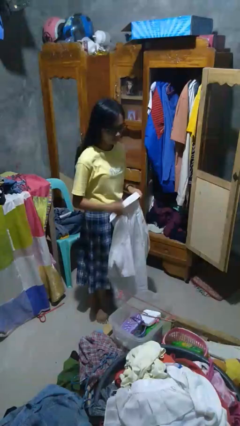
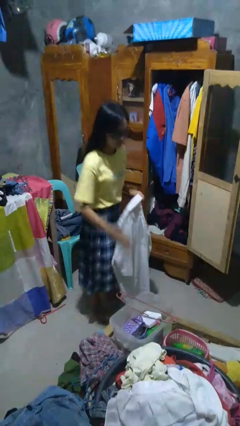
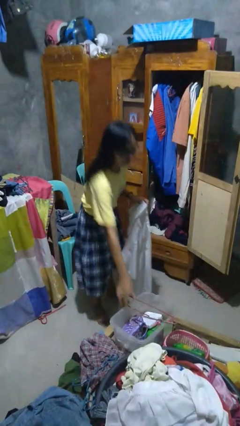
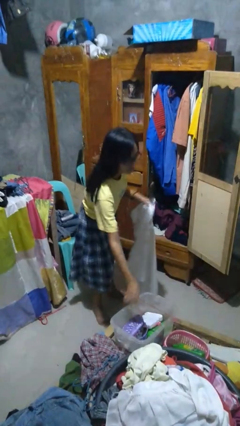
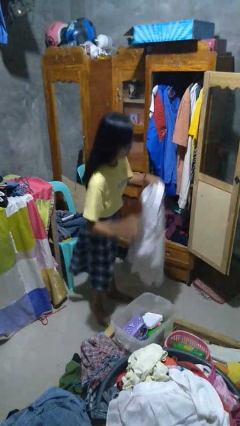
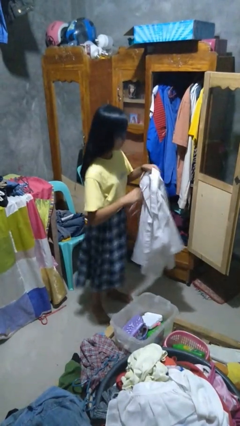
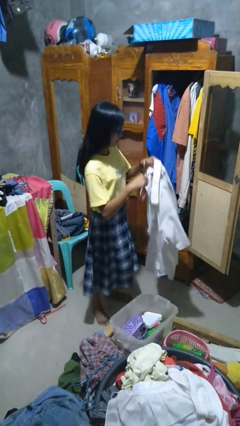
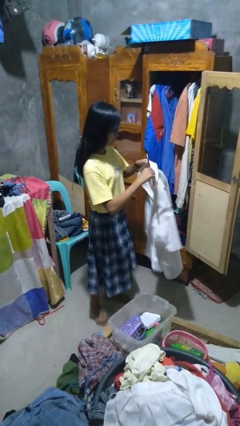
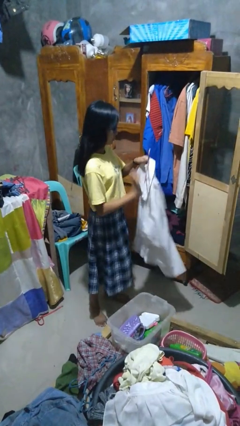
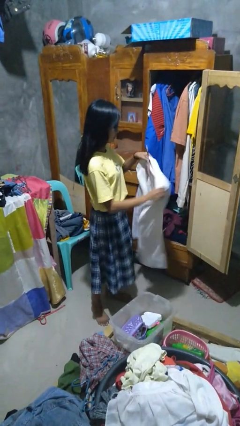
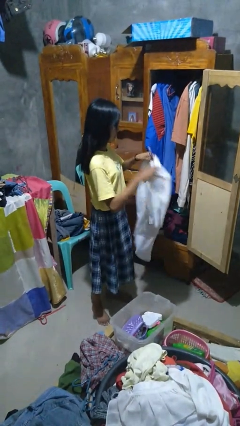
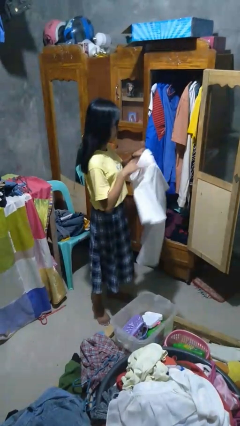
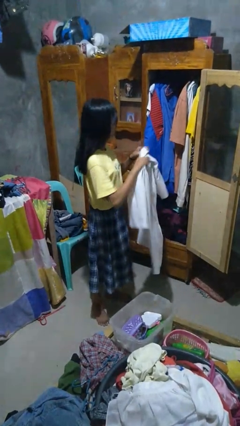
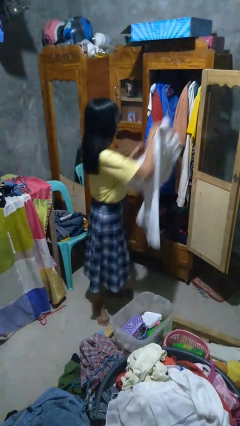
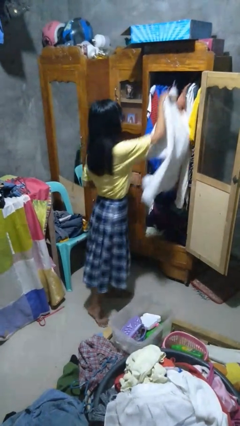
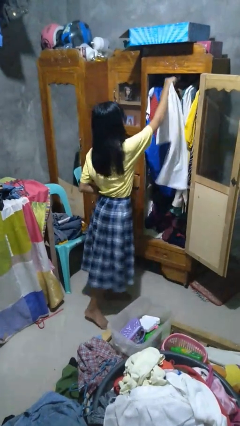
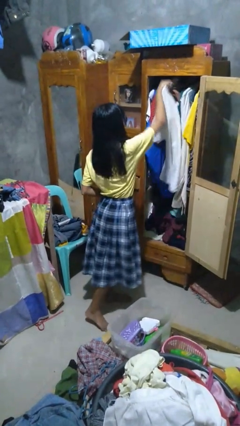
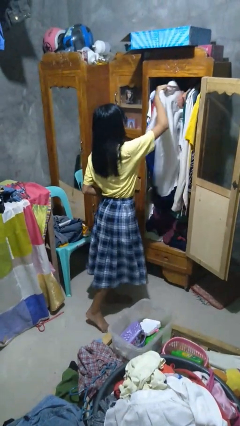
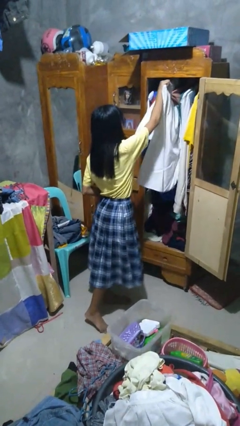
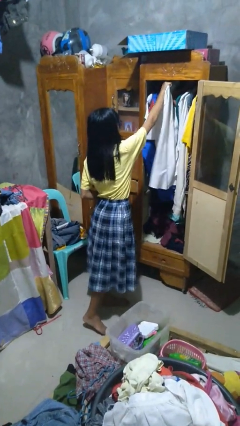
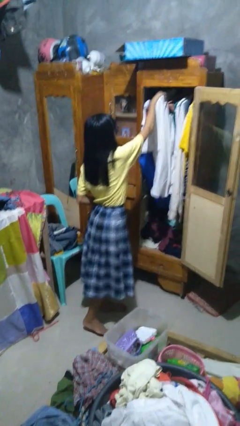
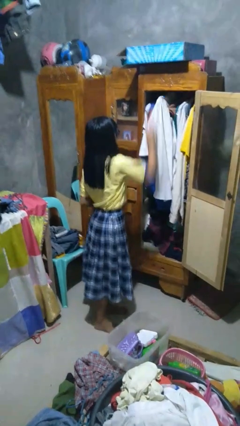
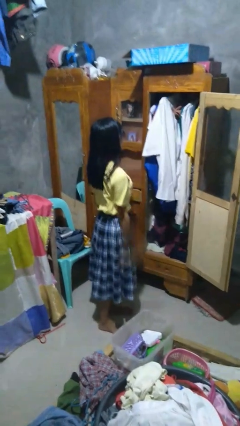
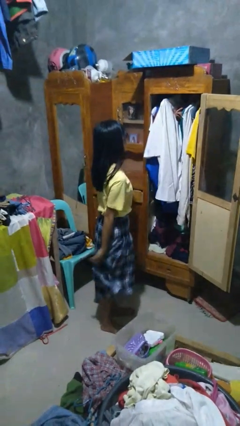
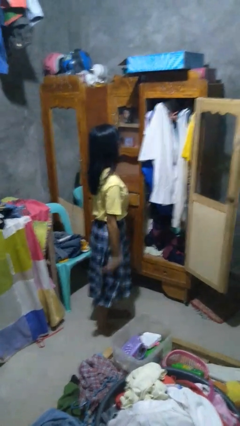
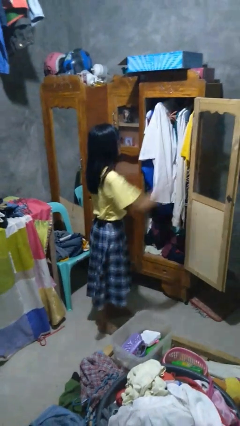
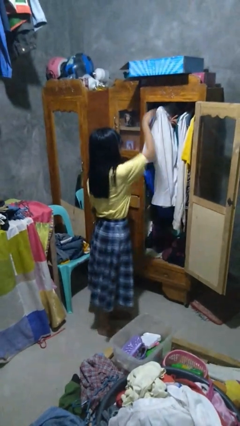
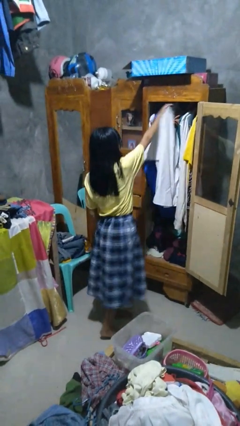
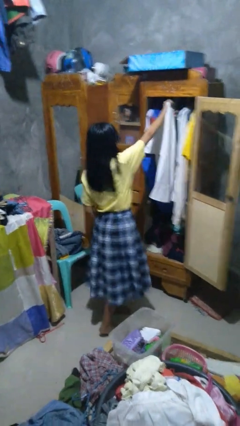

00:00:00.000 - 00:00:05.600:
person puts clothes into closet

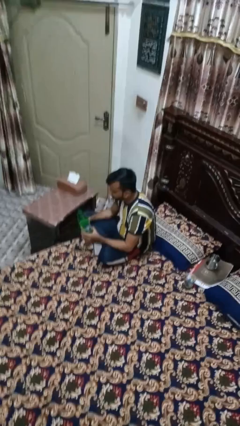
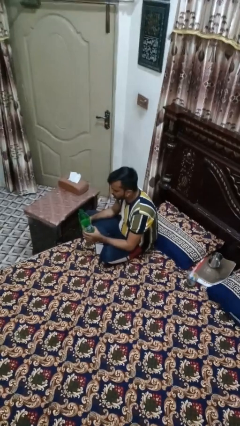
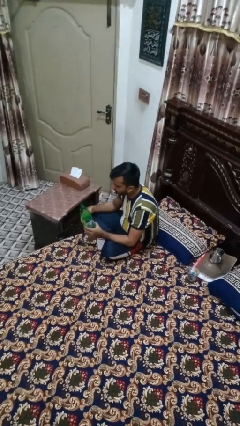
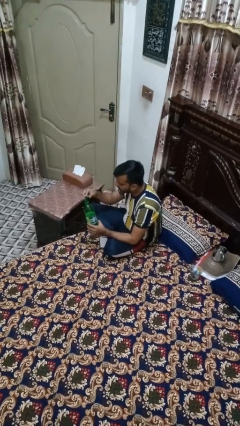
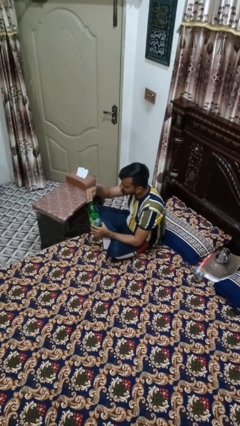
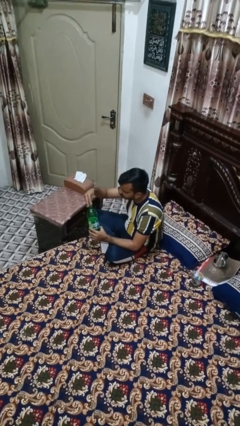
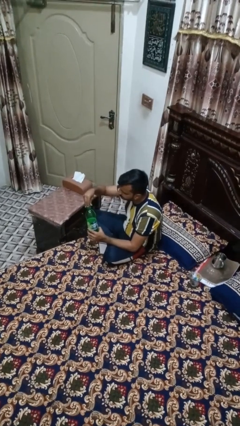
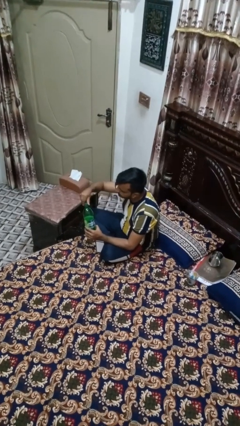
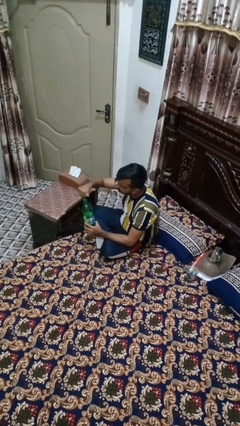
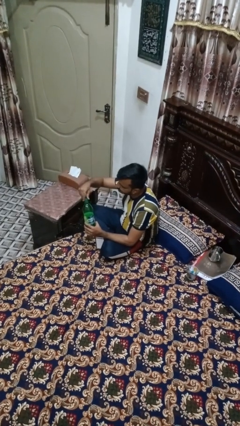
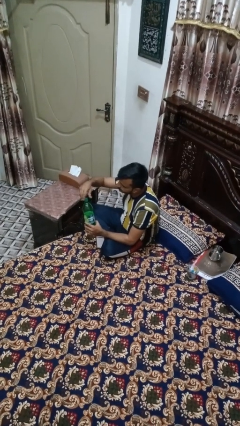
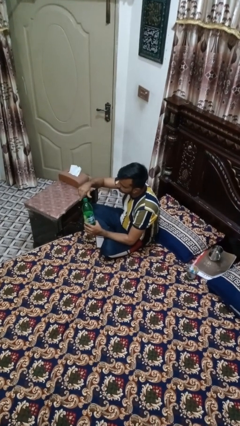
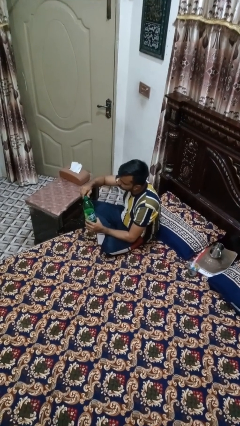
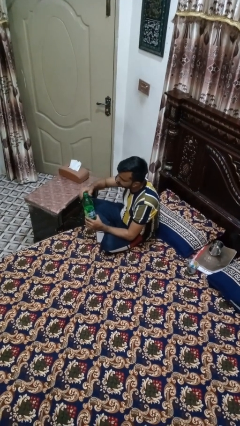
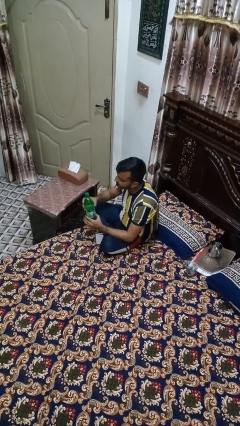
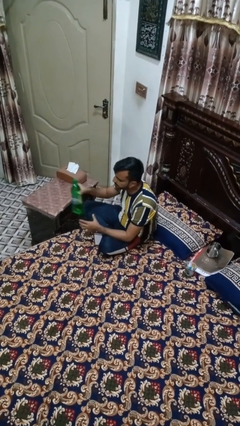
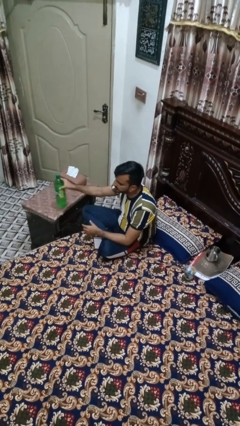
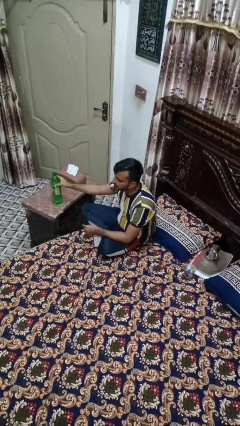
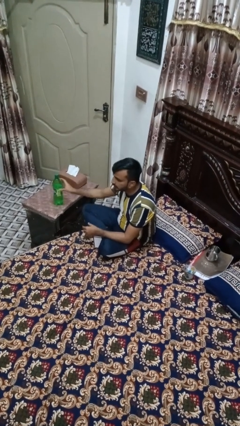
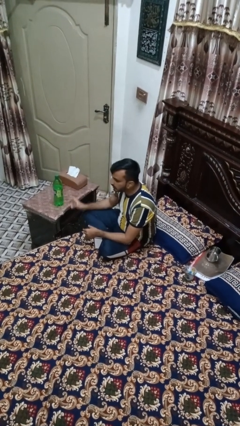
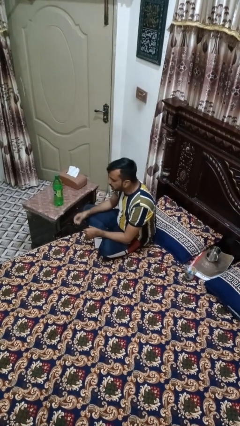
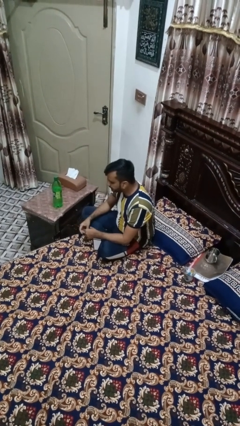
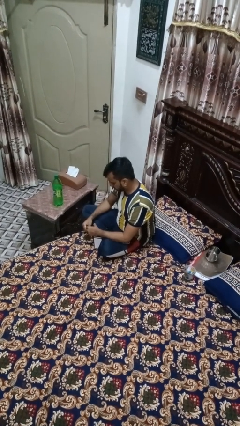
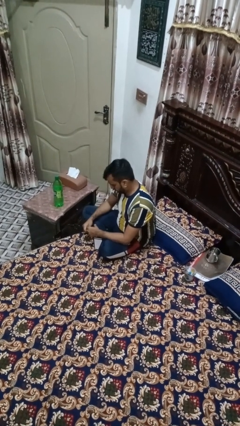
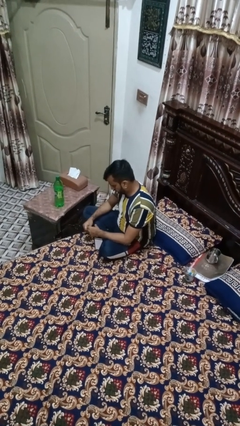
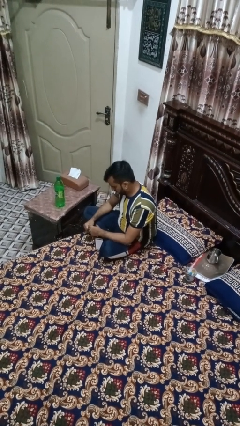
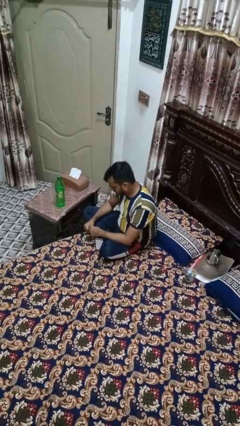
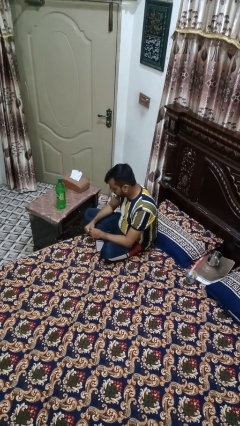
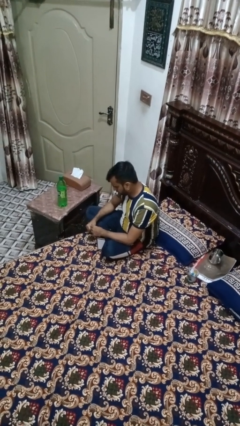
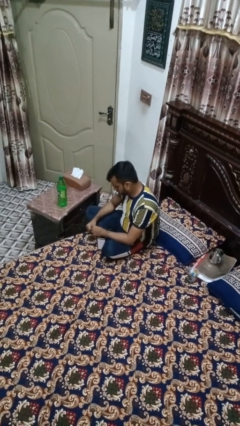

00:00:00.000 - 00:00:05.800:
person screws lid to bottle

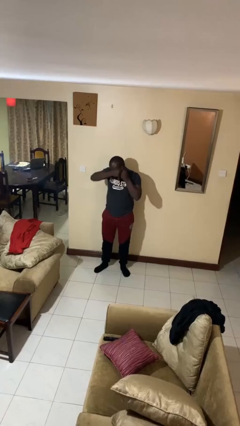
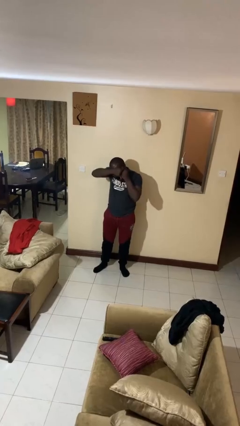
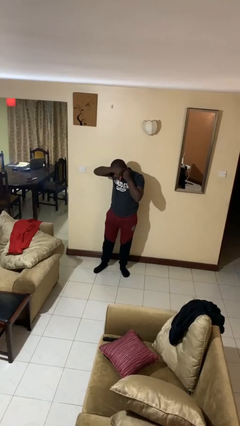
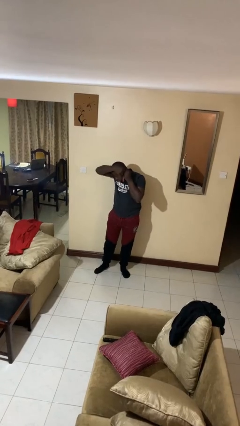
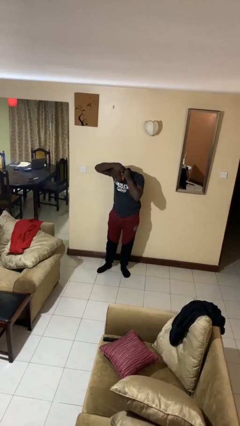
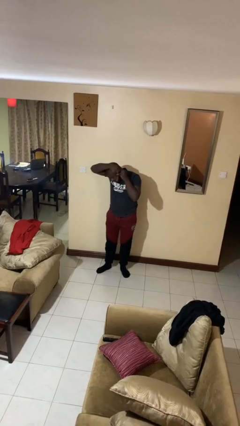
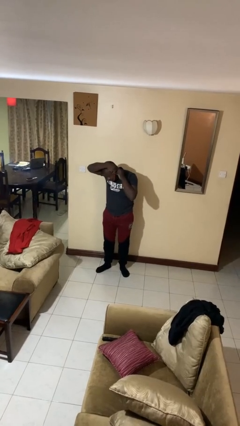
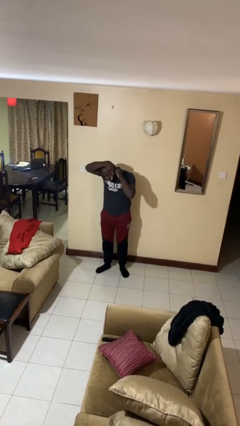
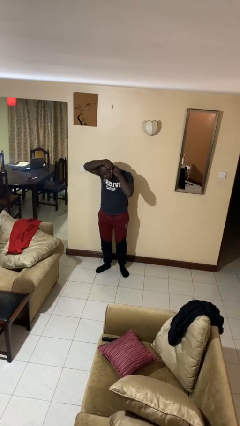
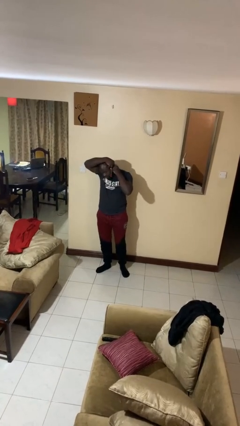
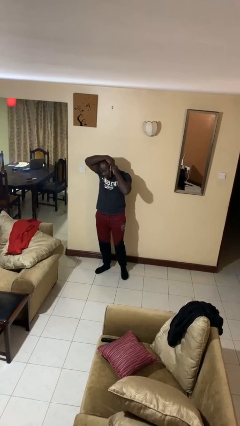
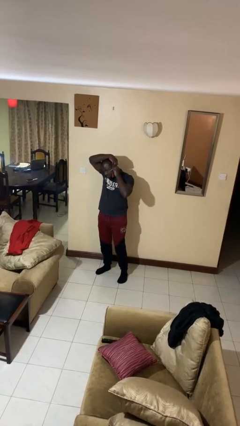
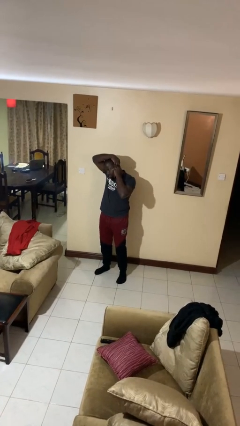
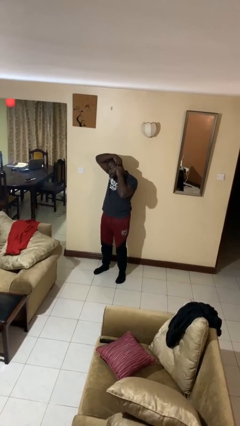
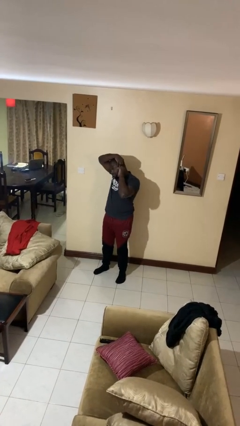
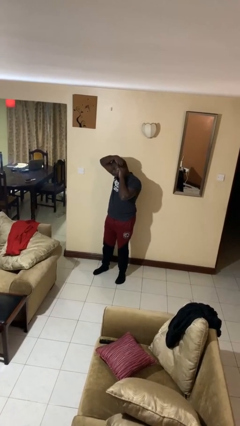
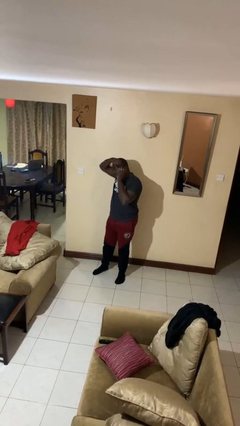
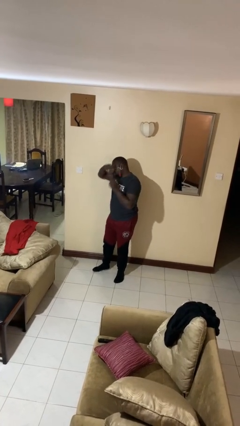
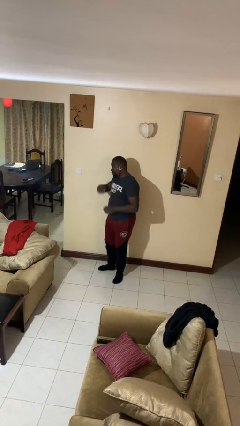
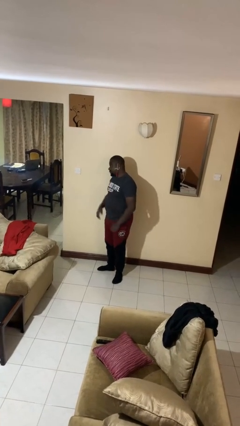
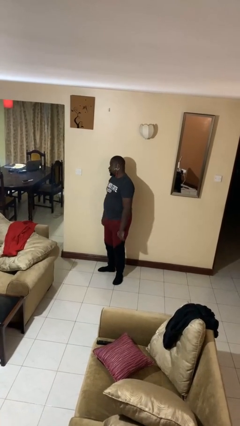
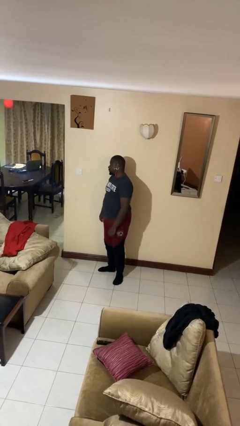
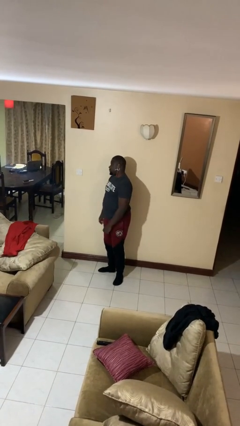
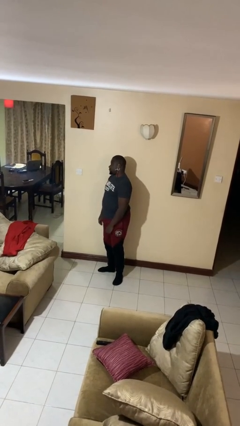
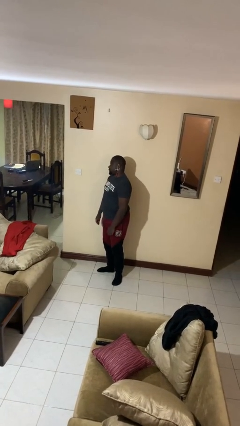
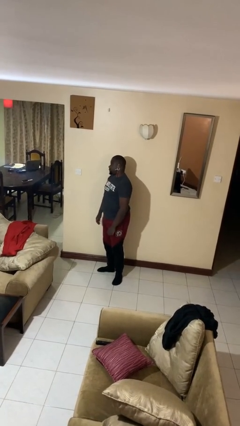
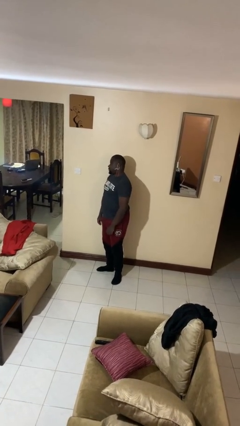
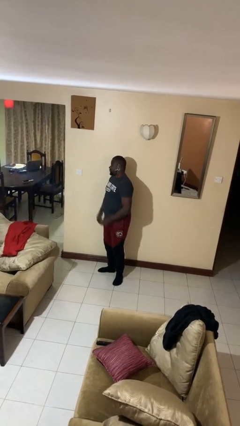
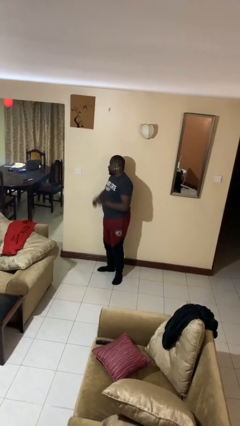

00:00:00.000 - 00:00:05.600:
person puts on earrings

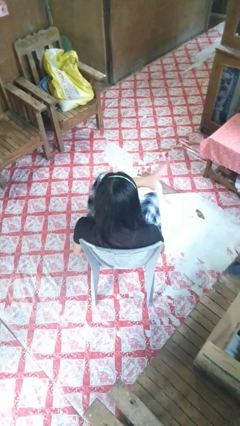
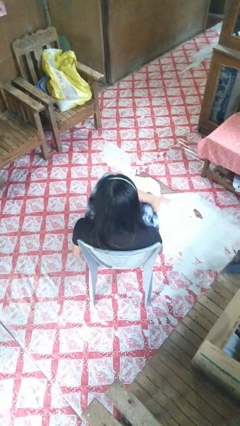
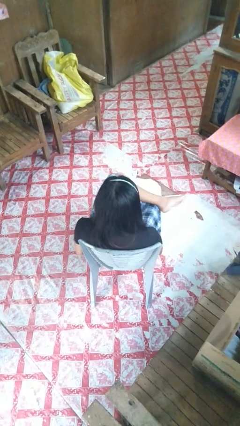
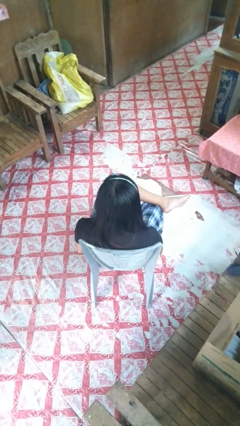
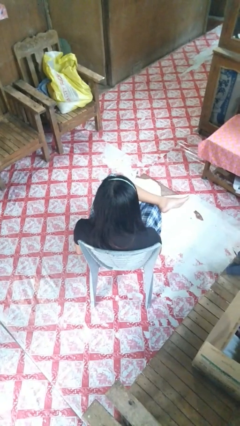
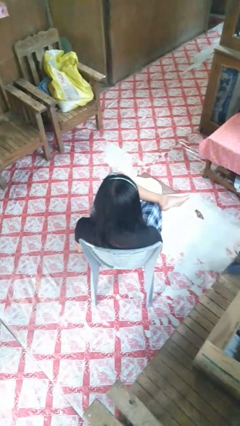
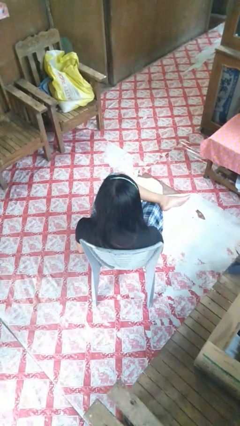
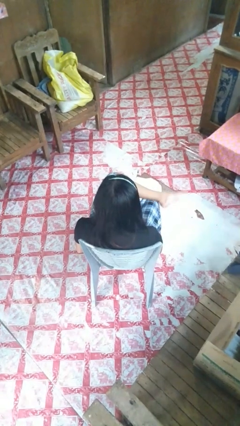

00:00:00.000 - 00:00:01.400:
person crosses legs
